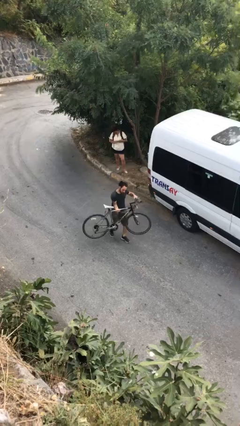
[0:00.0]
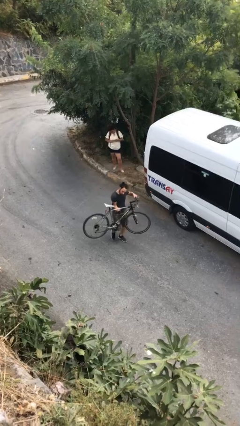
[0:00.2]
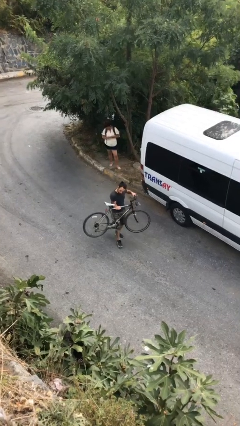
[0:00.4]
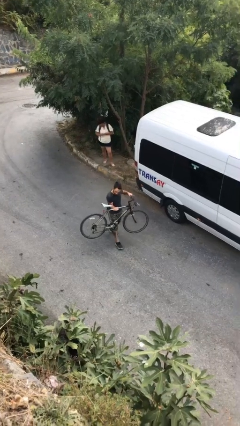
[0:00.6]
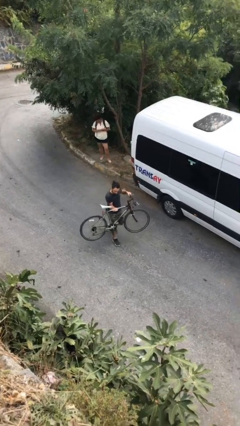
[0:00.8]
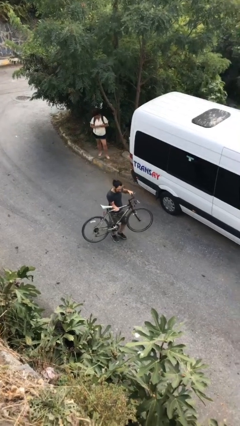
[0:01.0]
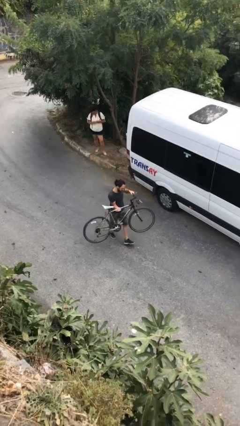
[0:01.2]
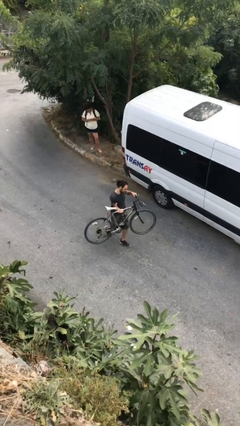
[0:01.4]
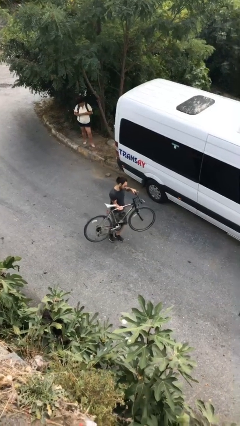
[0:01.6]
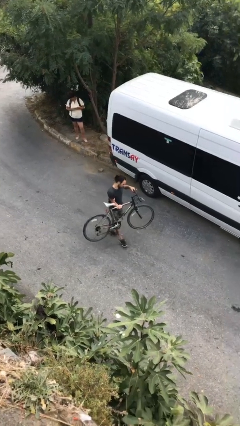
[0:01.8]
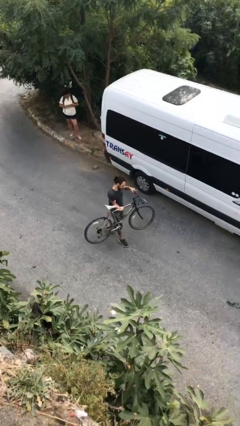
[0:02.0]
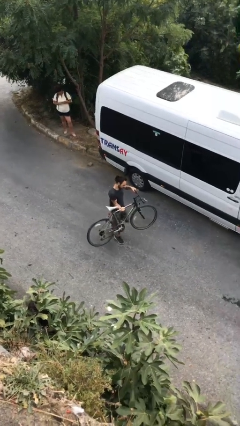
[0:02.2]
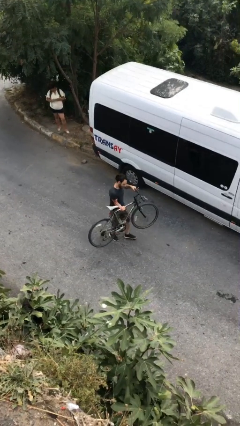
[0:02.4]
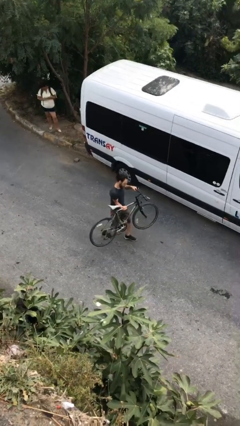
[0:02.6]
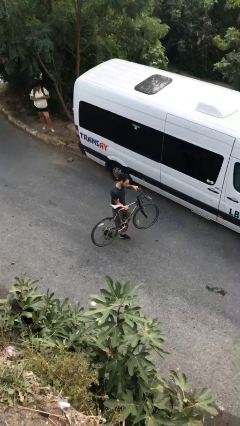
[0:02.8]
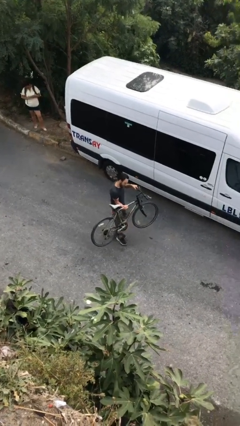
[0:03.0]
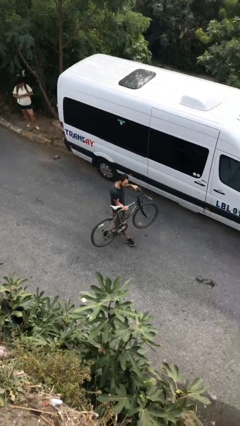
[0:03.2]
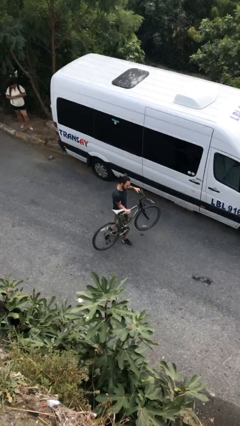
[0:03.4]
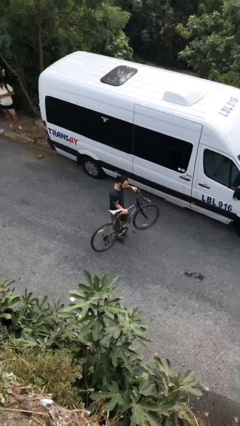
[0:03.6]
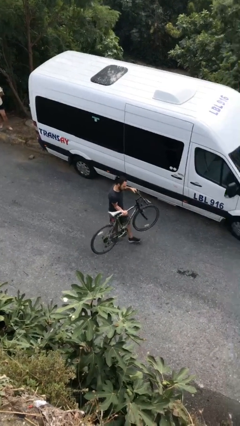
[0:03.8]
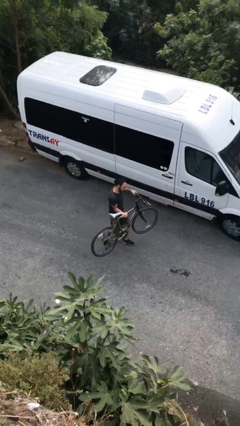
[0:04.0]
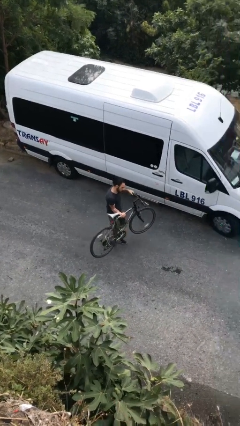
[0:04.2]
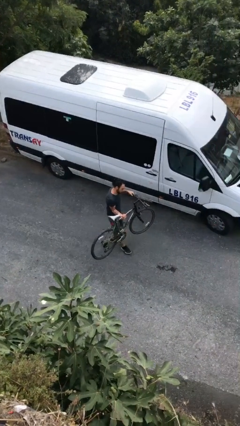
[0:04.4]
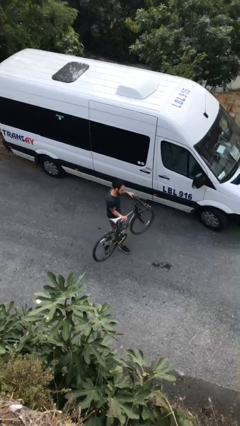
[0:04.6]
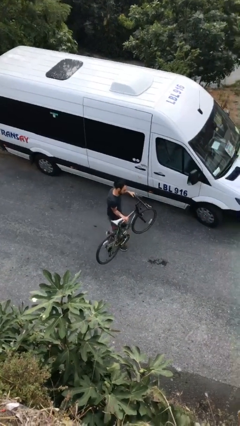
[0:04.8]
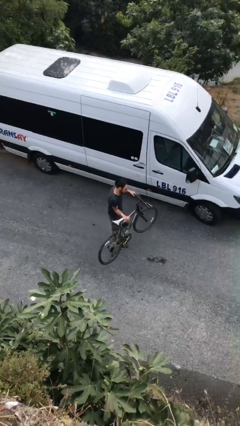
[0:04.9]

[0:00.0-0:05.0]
person carries heavy object

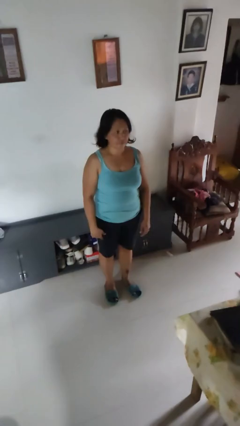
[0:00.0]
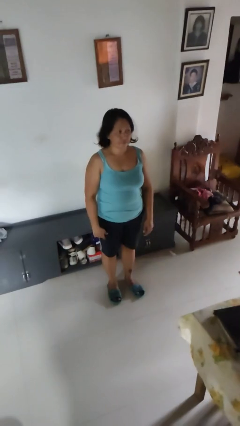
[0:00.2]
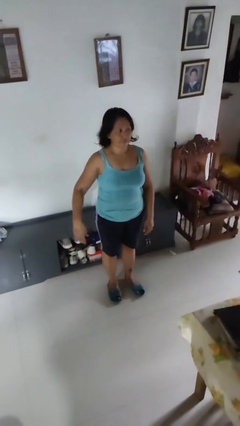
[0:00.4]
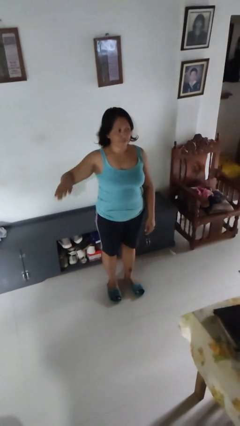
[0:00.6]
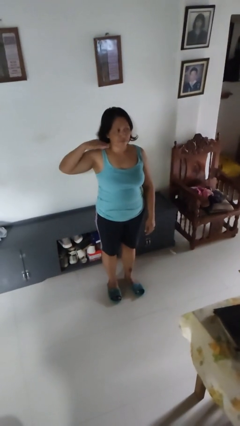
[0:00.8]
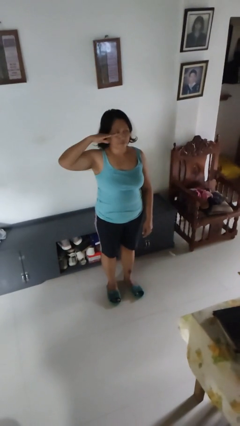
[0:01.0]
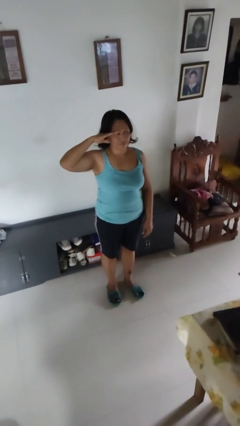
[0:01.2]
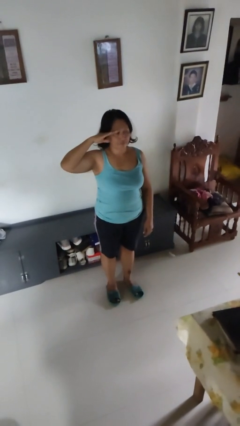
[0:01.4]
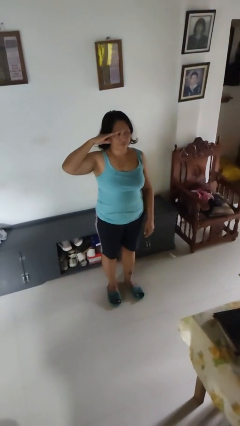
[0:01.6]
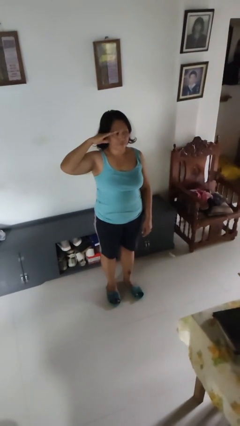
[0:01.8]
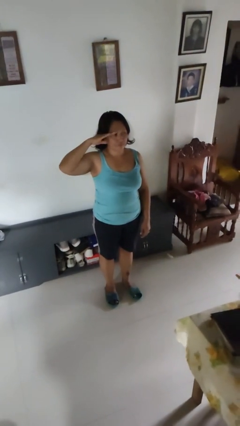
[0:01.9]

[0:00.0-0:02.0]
person salutes

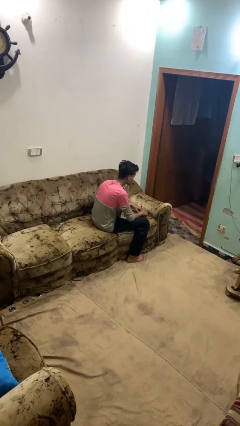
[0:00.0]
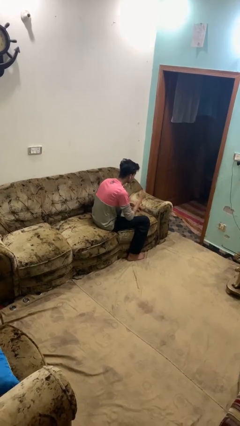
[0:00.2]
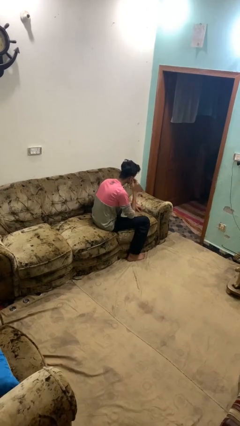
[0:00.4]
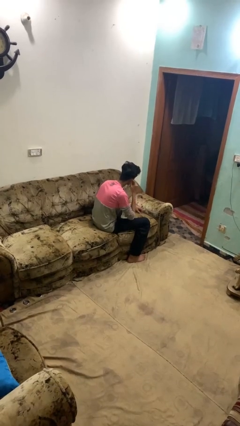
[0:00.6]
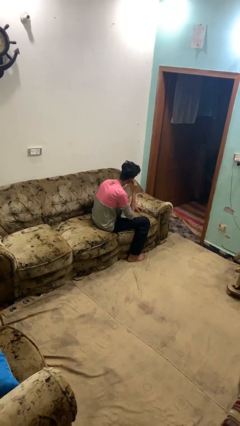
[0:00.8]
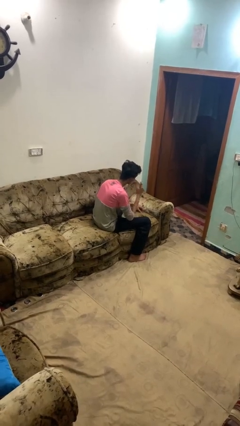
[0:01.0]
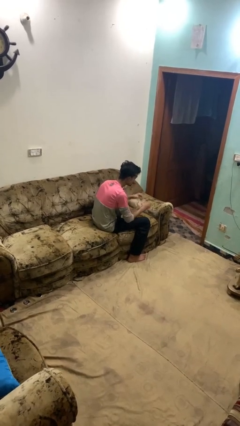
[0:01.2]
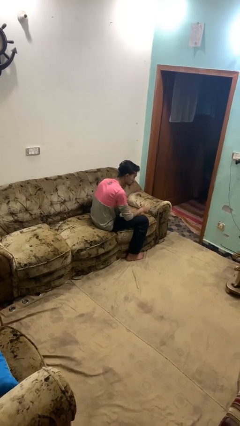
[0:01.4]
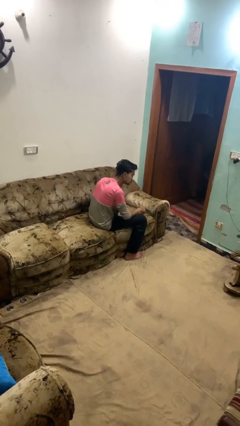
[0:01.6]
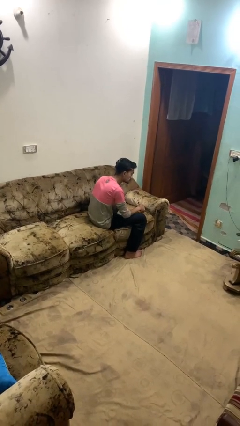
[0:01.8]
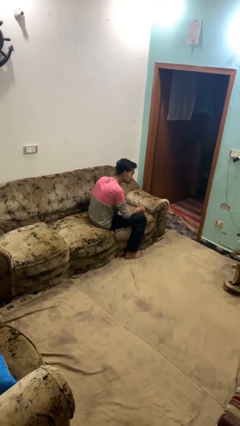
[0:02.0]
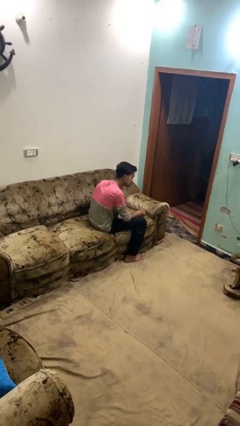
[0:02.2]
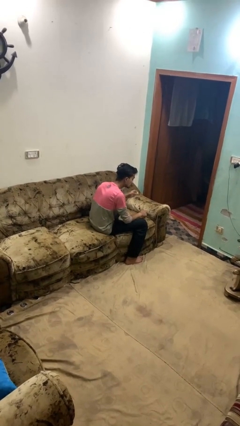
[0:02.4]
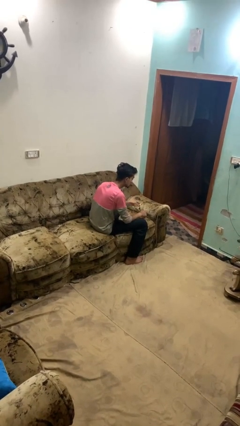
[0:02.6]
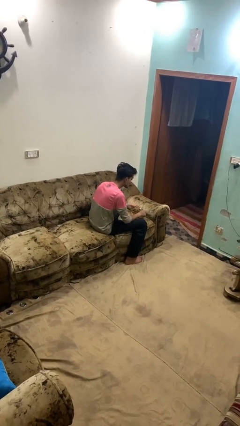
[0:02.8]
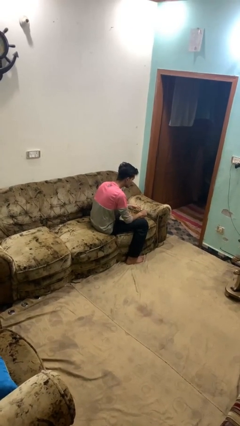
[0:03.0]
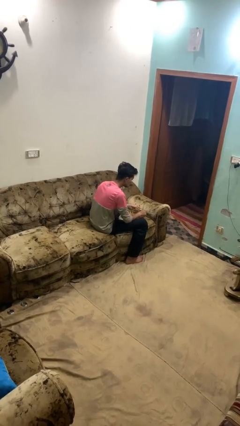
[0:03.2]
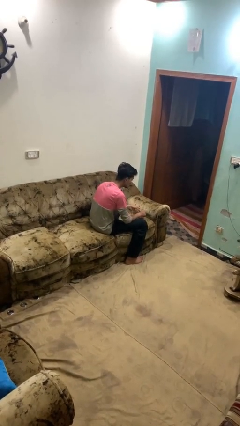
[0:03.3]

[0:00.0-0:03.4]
person takes off headphones

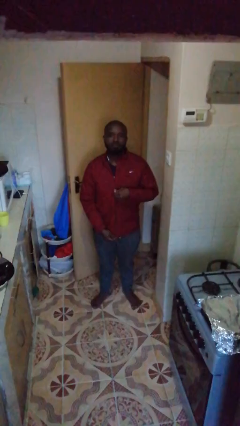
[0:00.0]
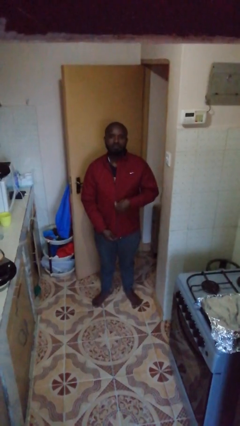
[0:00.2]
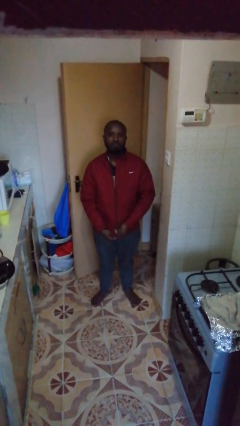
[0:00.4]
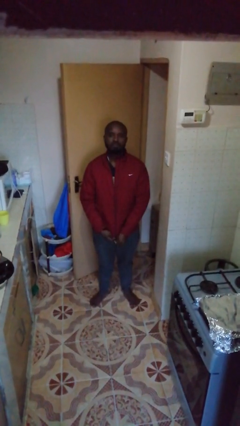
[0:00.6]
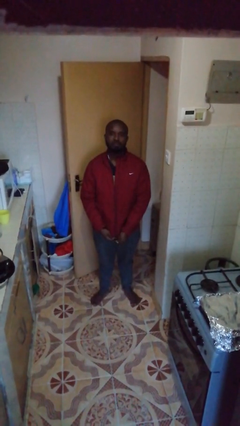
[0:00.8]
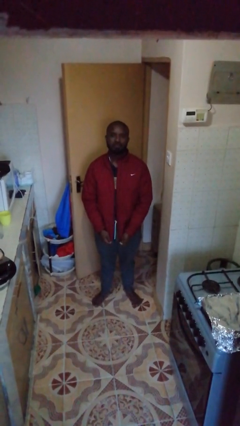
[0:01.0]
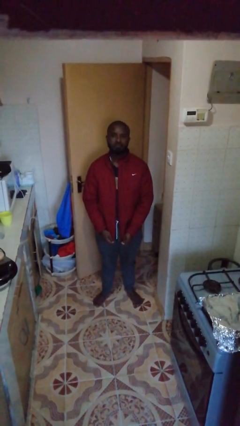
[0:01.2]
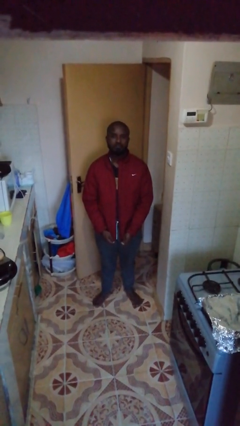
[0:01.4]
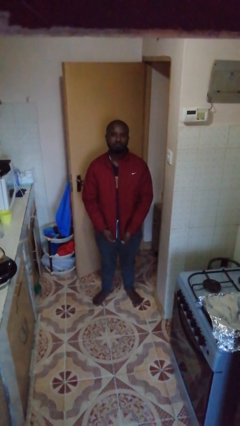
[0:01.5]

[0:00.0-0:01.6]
person unzips jacket

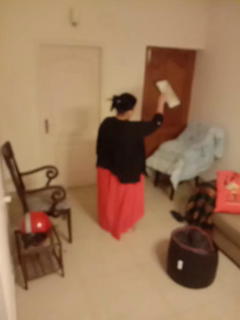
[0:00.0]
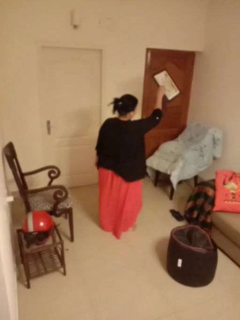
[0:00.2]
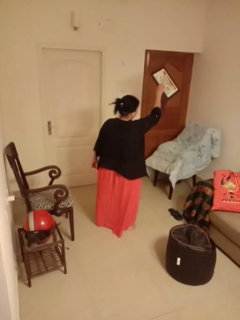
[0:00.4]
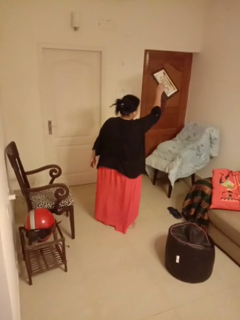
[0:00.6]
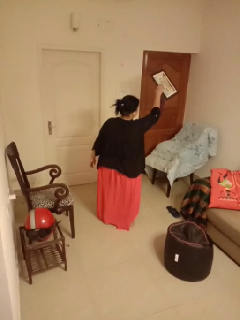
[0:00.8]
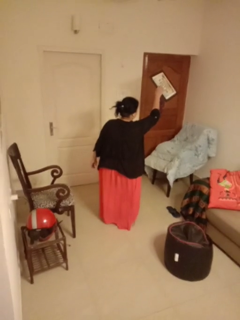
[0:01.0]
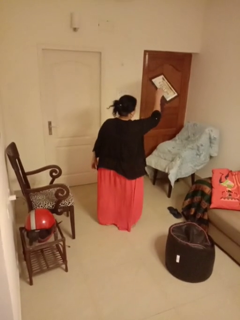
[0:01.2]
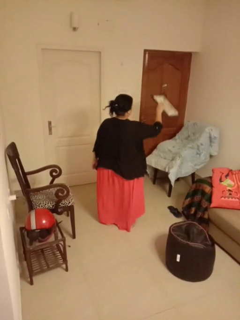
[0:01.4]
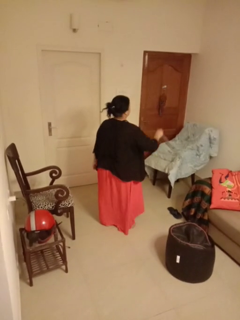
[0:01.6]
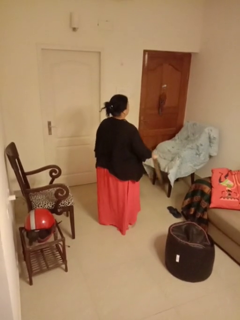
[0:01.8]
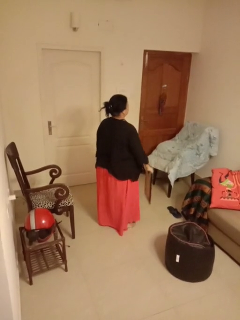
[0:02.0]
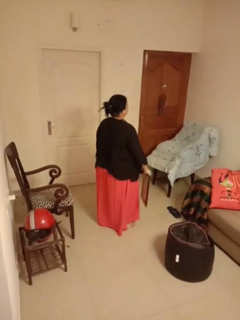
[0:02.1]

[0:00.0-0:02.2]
person holds object above head

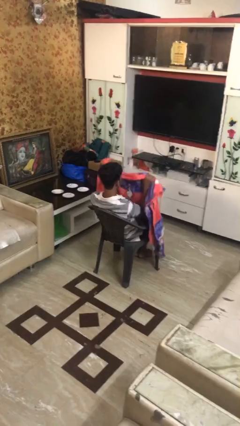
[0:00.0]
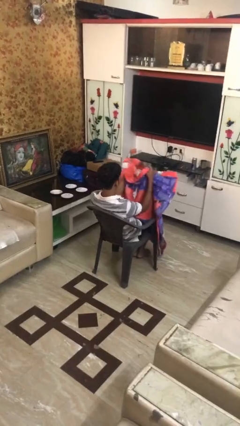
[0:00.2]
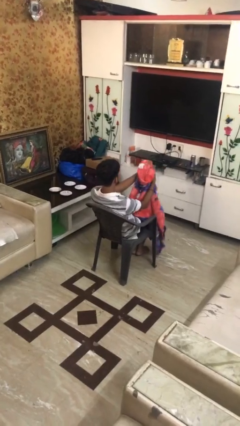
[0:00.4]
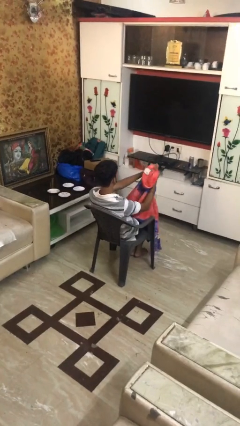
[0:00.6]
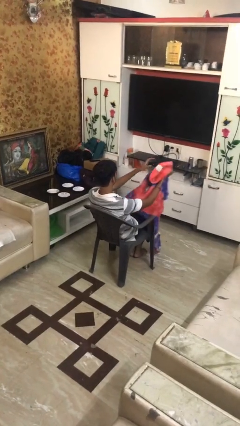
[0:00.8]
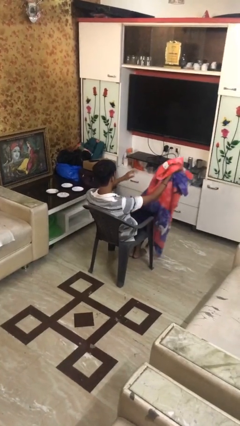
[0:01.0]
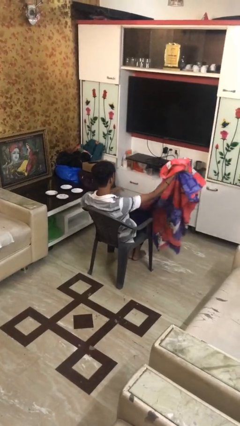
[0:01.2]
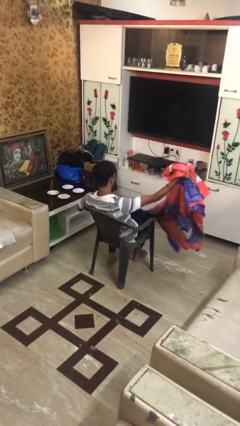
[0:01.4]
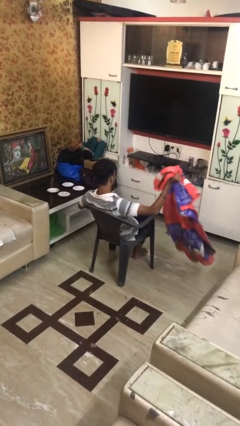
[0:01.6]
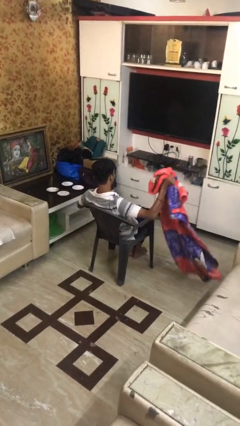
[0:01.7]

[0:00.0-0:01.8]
person uncovers with blanket

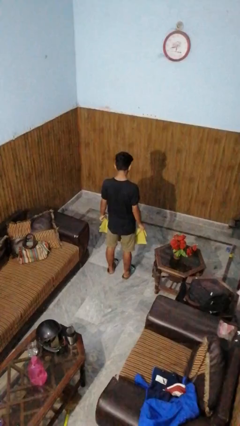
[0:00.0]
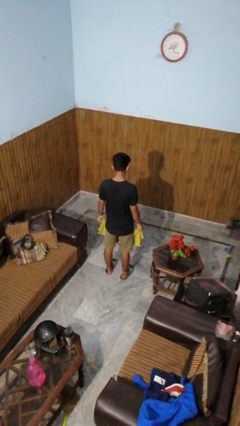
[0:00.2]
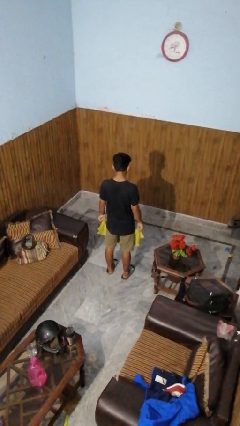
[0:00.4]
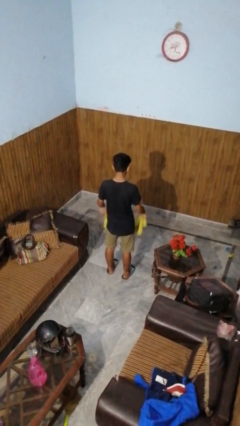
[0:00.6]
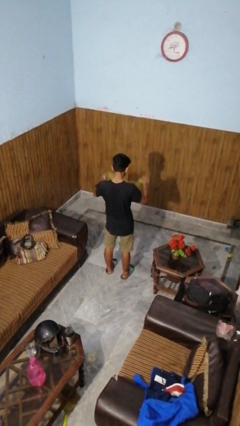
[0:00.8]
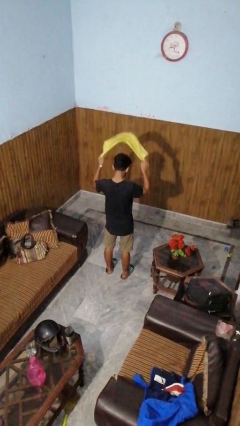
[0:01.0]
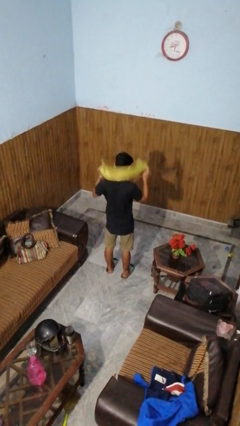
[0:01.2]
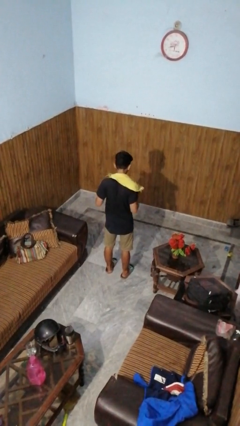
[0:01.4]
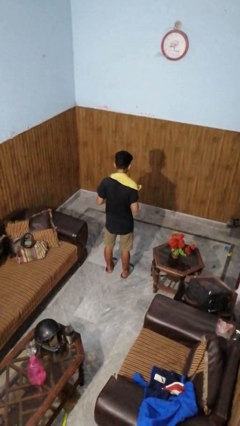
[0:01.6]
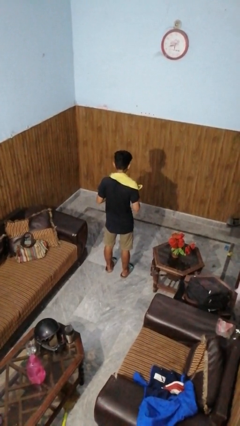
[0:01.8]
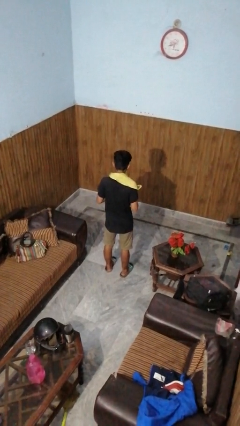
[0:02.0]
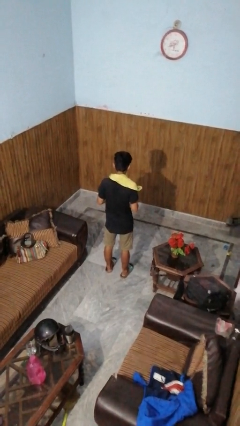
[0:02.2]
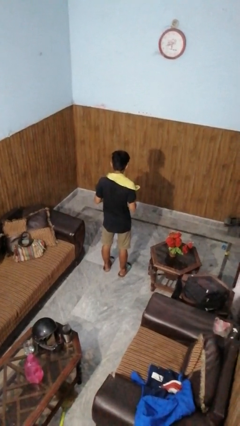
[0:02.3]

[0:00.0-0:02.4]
person puts on scarf
